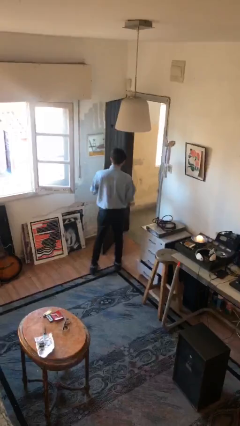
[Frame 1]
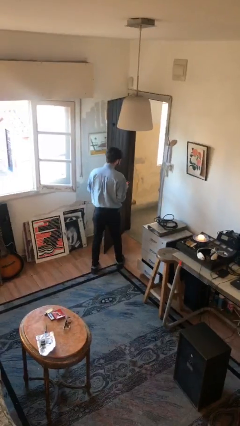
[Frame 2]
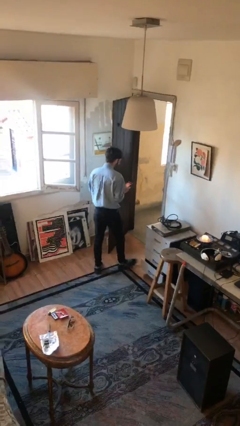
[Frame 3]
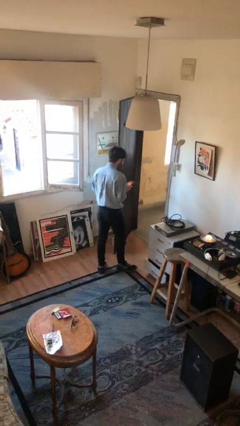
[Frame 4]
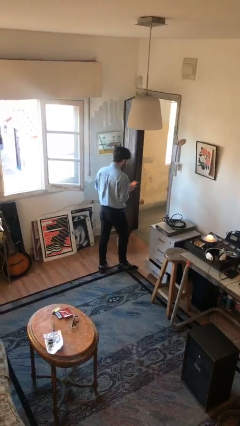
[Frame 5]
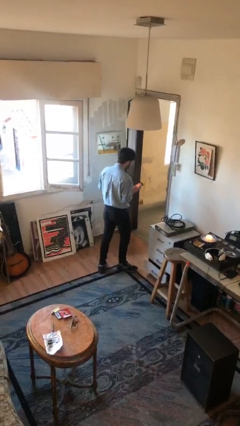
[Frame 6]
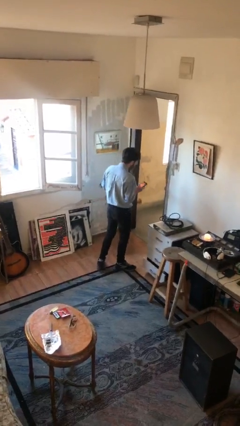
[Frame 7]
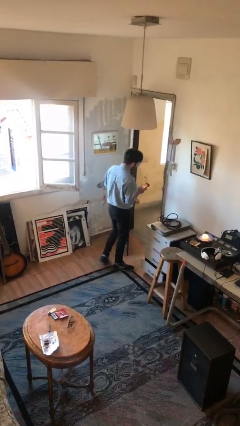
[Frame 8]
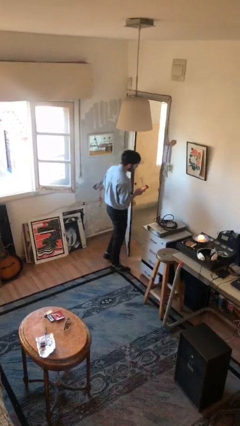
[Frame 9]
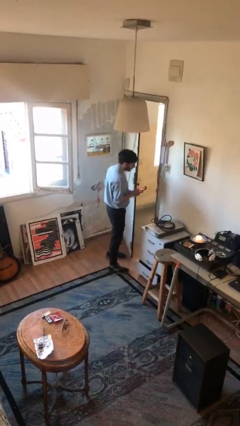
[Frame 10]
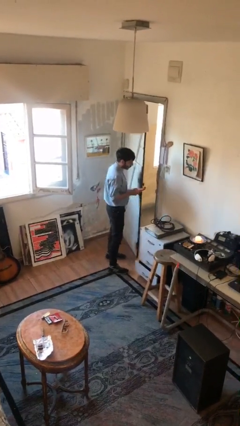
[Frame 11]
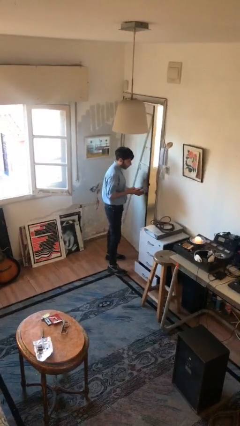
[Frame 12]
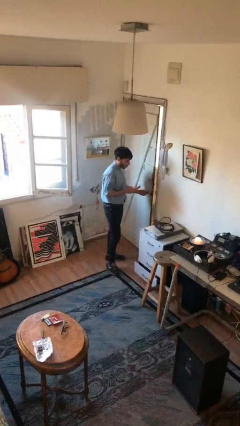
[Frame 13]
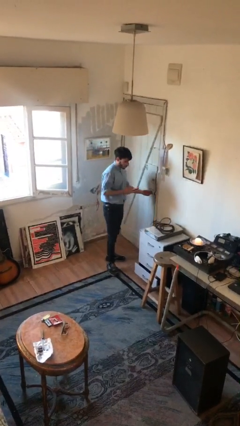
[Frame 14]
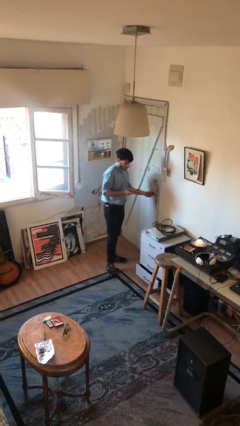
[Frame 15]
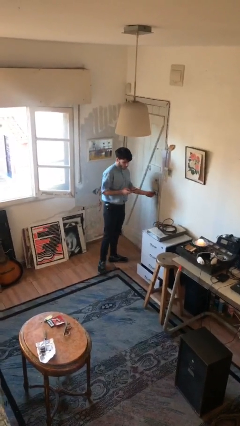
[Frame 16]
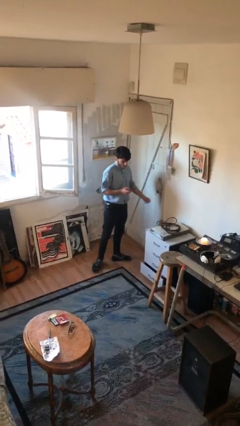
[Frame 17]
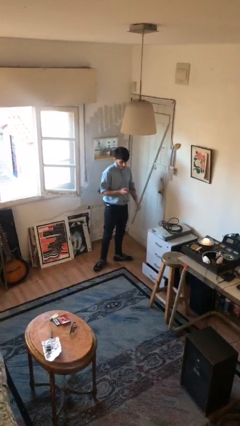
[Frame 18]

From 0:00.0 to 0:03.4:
person closes facility door

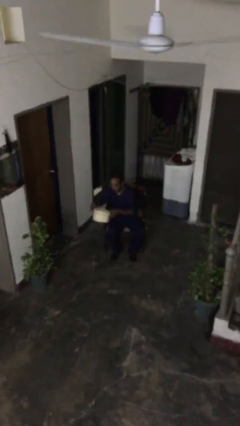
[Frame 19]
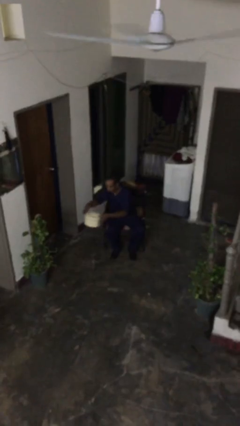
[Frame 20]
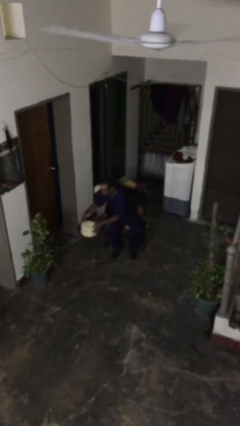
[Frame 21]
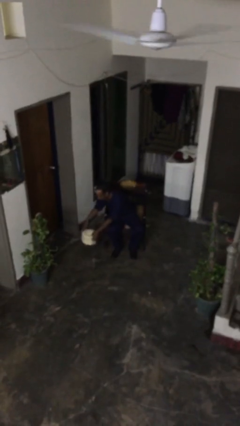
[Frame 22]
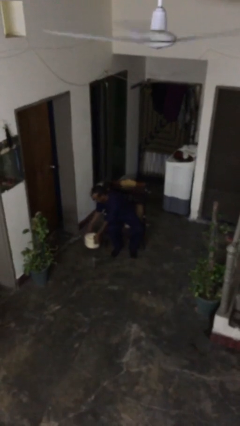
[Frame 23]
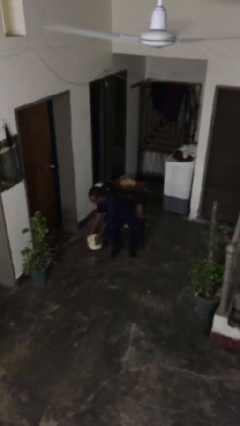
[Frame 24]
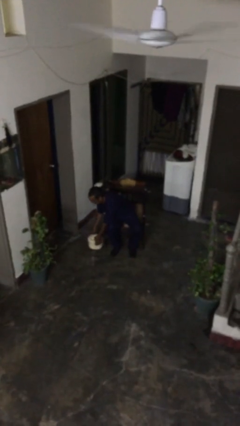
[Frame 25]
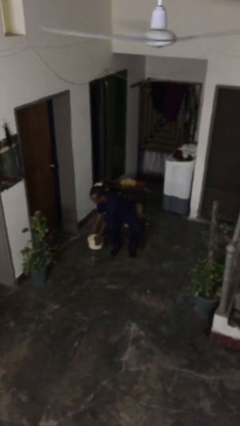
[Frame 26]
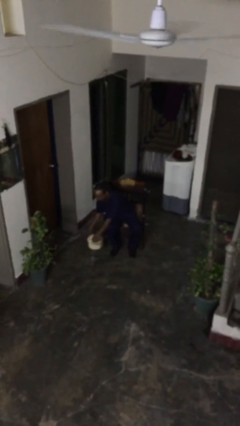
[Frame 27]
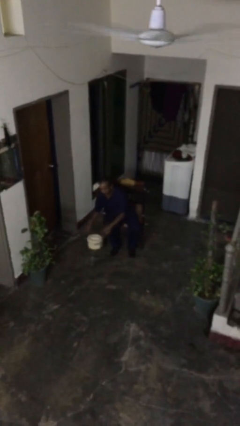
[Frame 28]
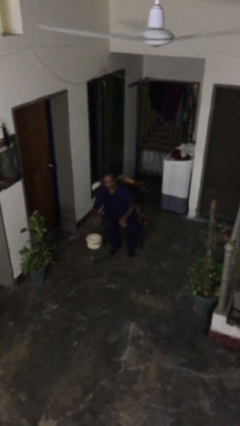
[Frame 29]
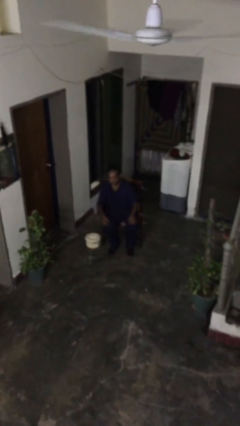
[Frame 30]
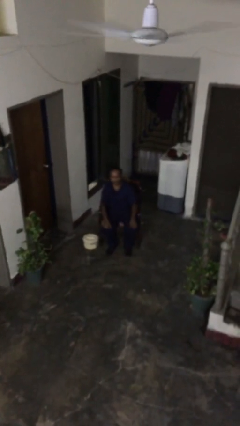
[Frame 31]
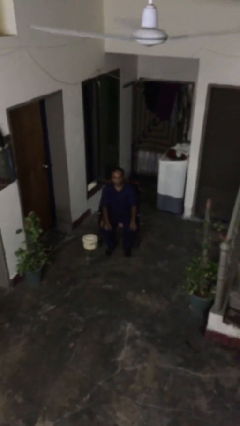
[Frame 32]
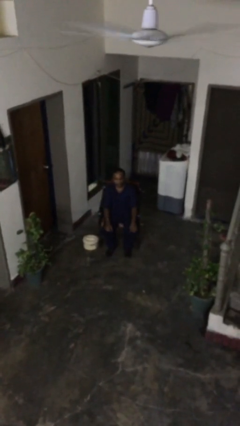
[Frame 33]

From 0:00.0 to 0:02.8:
person puts down object on floor

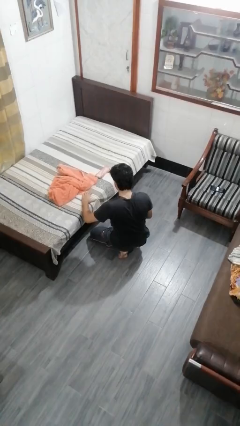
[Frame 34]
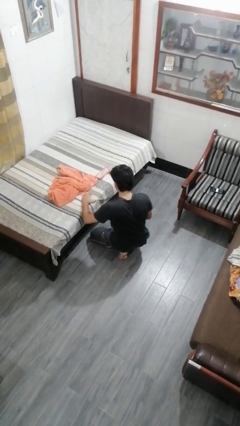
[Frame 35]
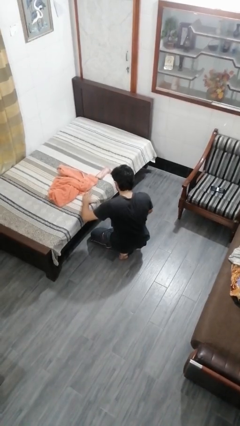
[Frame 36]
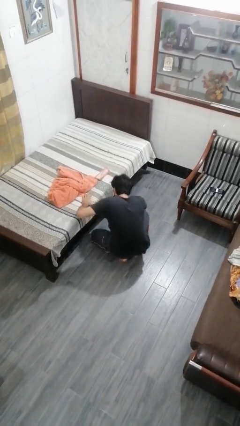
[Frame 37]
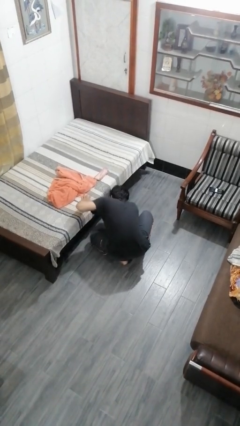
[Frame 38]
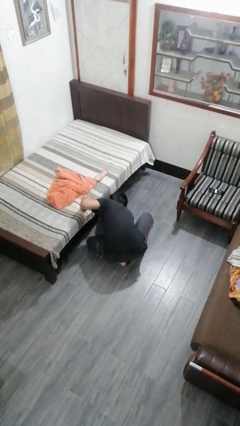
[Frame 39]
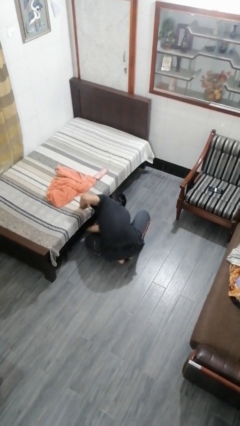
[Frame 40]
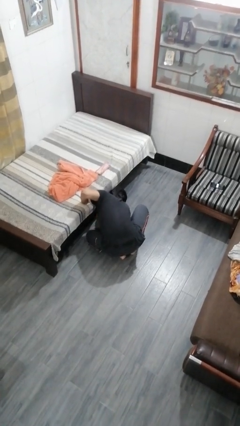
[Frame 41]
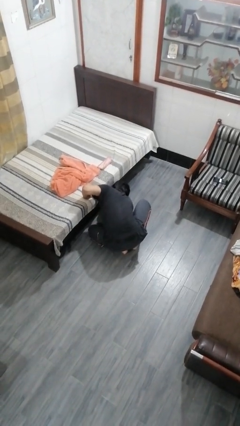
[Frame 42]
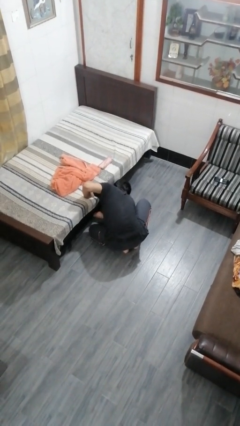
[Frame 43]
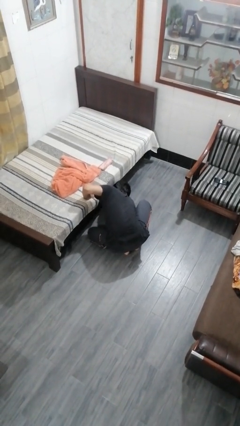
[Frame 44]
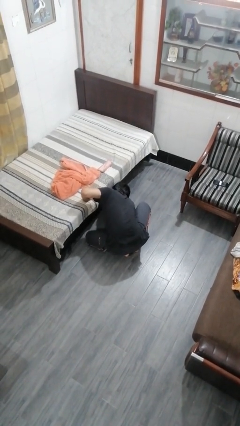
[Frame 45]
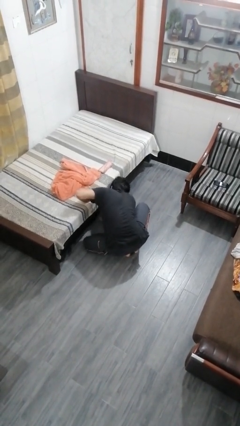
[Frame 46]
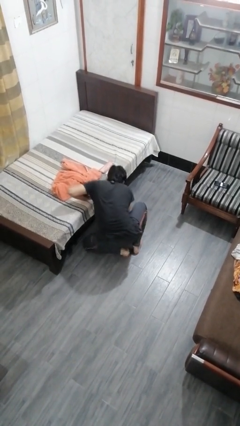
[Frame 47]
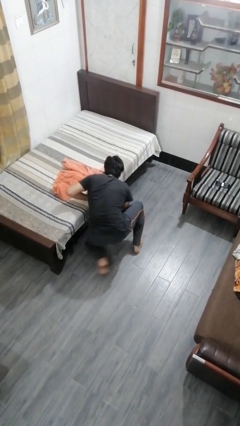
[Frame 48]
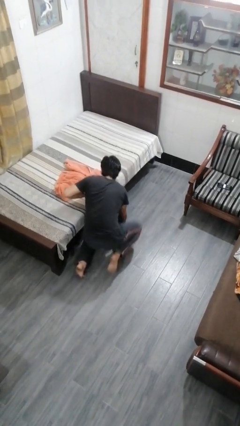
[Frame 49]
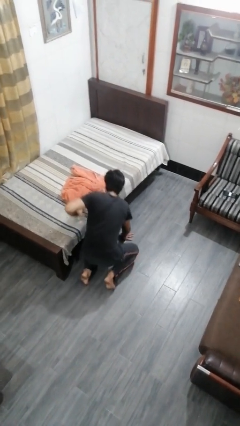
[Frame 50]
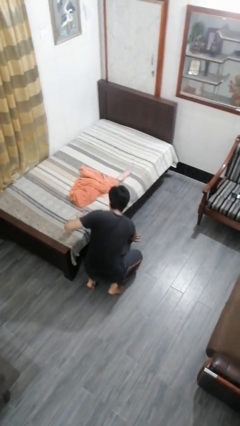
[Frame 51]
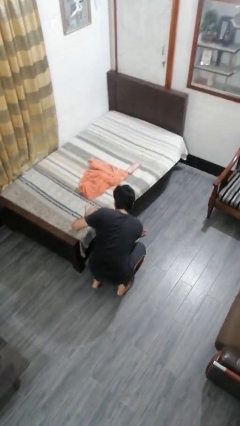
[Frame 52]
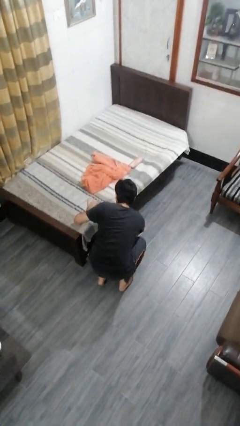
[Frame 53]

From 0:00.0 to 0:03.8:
person searches under bed

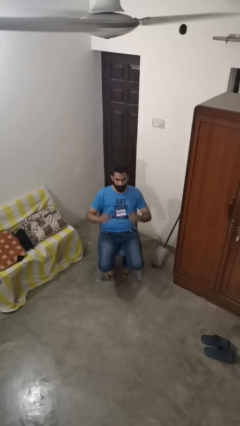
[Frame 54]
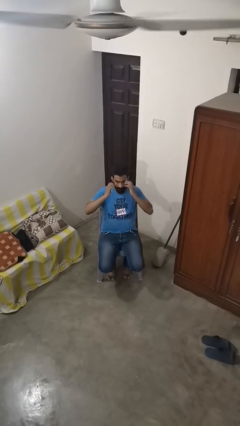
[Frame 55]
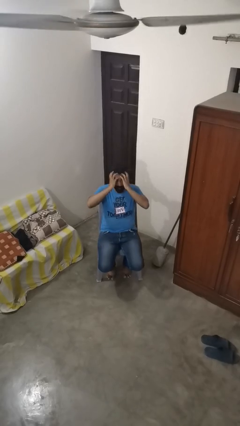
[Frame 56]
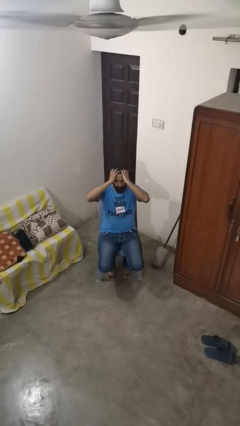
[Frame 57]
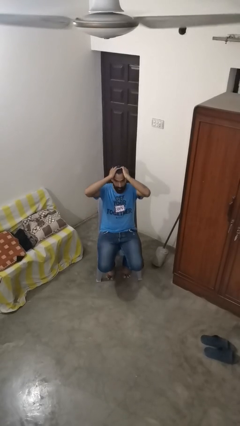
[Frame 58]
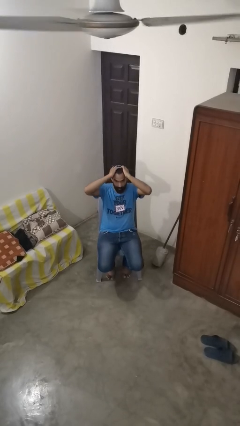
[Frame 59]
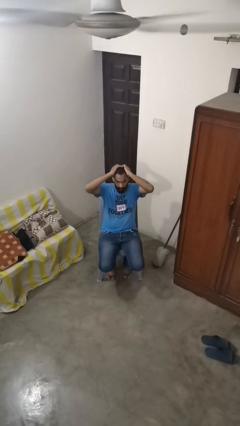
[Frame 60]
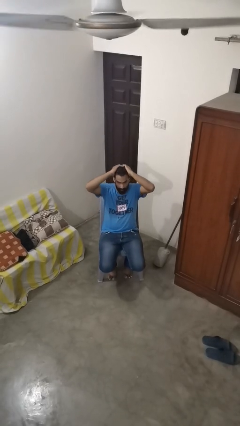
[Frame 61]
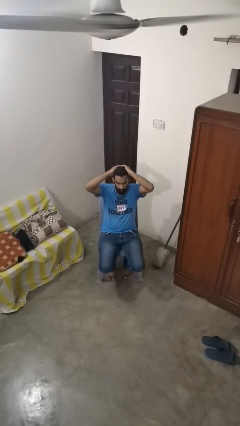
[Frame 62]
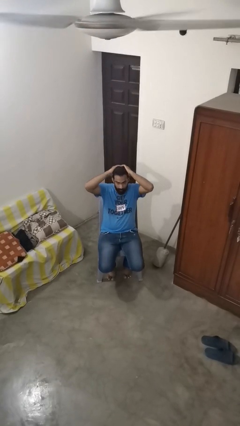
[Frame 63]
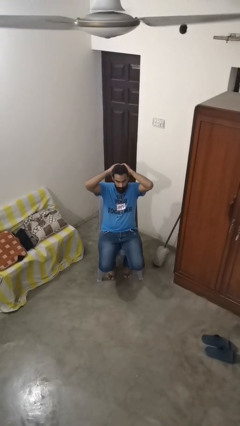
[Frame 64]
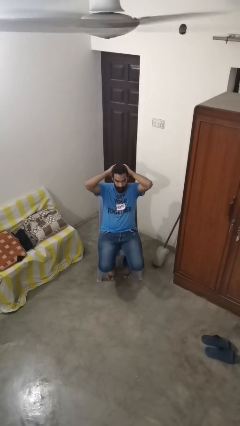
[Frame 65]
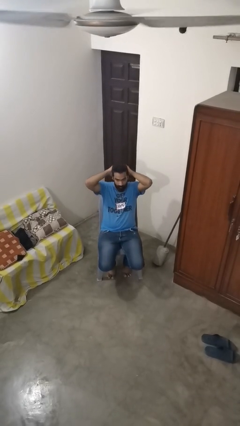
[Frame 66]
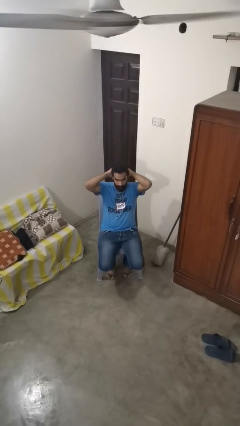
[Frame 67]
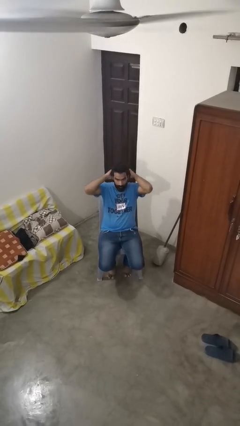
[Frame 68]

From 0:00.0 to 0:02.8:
person strokes hair

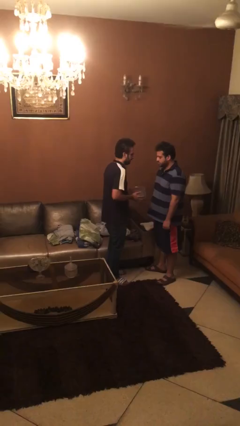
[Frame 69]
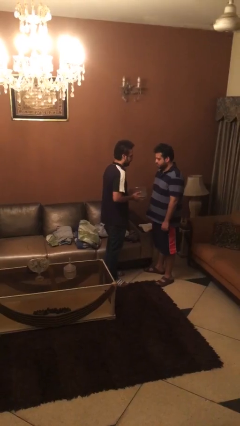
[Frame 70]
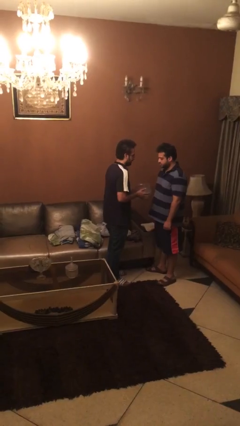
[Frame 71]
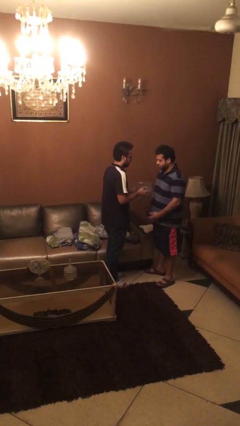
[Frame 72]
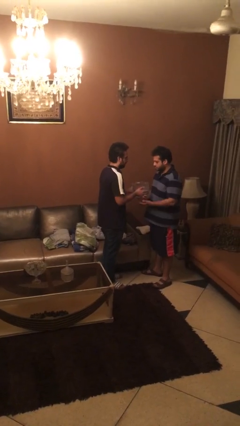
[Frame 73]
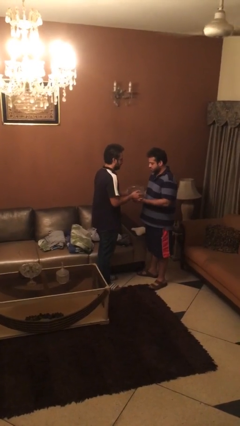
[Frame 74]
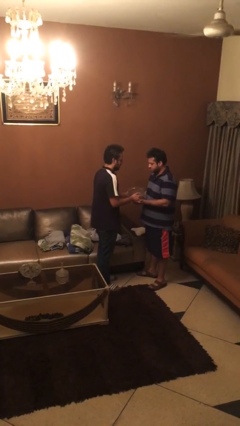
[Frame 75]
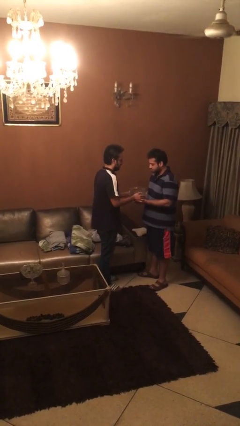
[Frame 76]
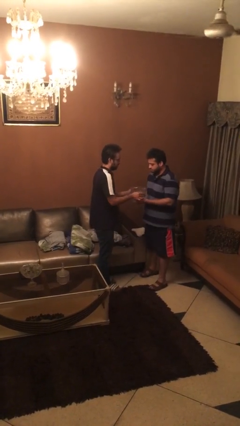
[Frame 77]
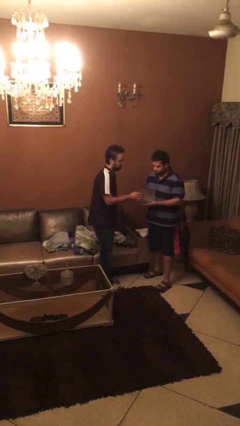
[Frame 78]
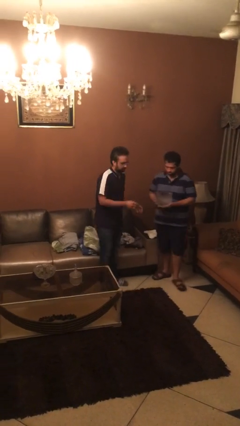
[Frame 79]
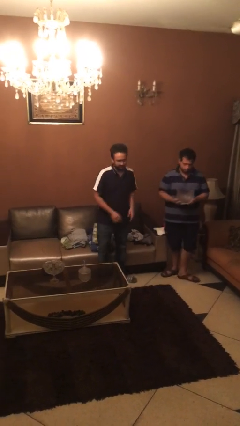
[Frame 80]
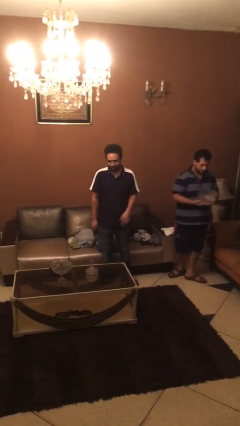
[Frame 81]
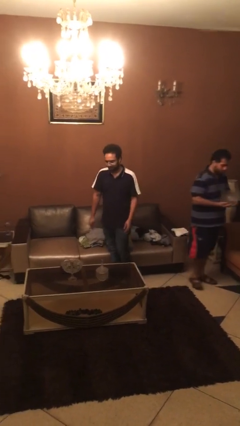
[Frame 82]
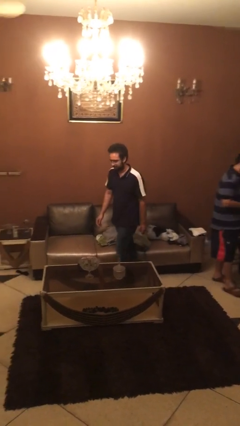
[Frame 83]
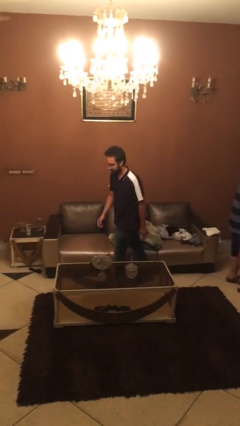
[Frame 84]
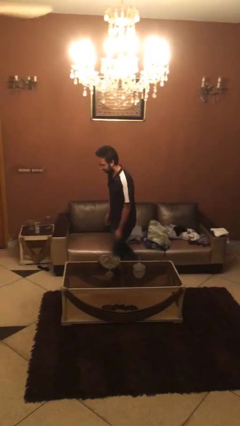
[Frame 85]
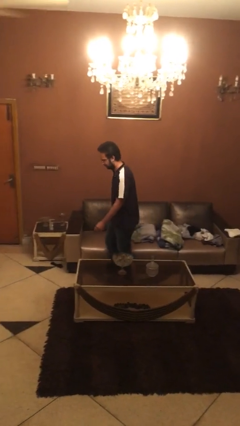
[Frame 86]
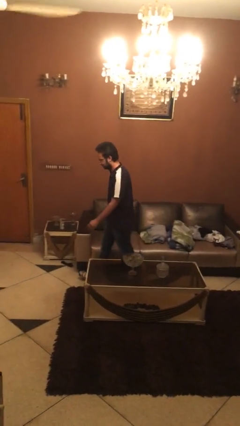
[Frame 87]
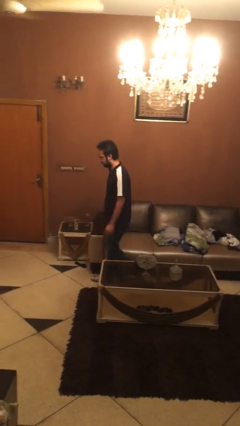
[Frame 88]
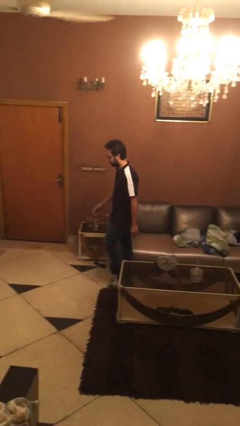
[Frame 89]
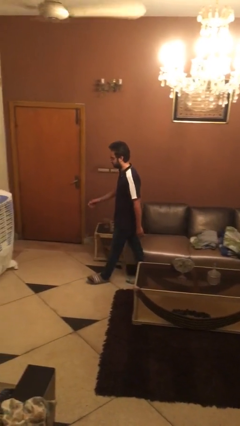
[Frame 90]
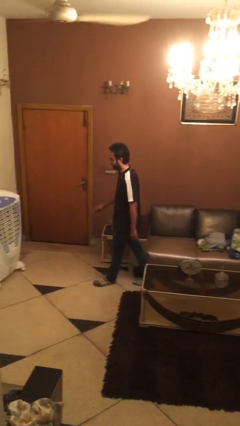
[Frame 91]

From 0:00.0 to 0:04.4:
person transfers object to person

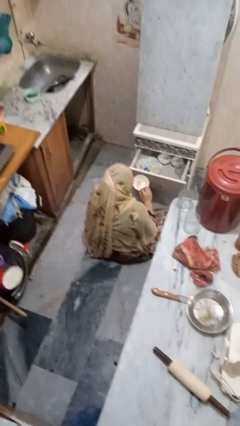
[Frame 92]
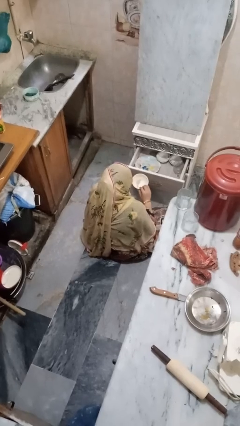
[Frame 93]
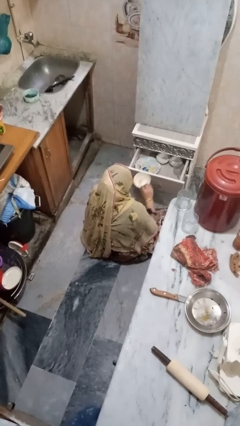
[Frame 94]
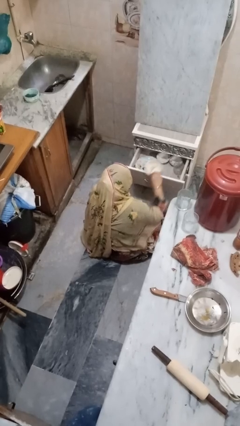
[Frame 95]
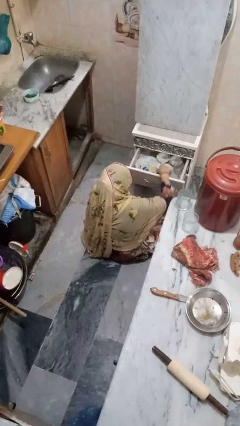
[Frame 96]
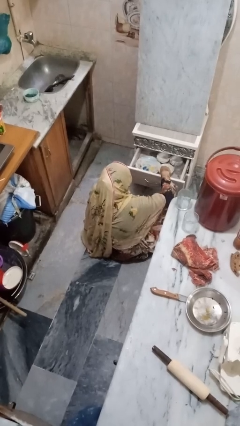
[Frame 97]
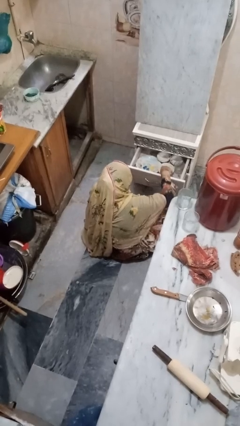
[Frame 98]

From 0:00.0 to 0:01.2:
person puts object into kitchen drawer
